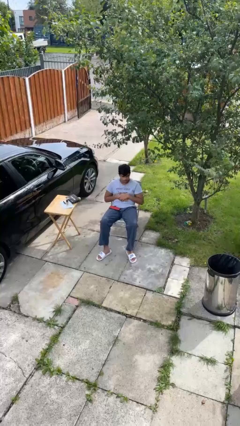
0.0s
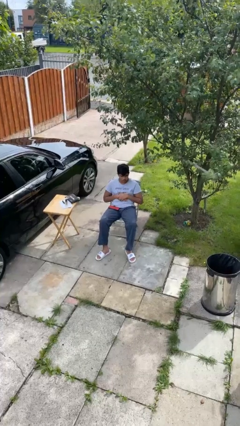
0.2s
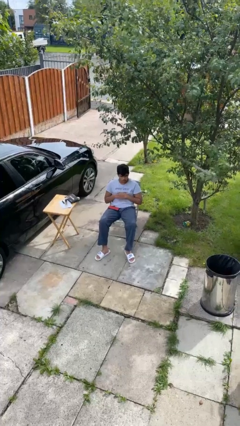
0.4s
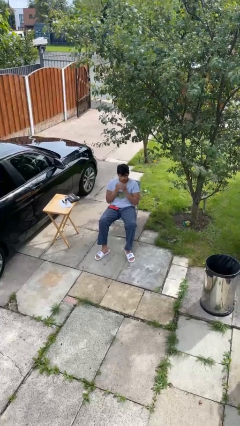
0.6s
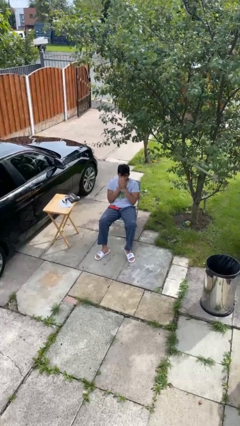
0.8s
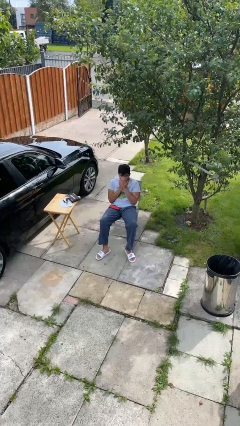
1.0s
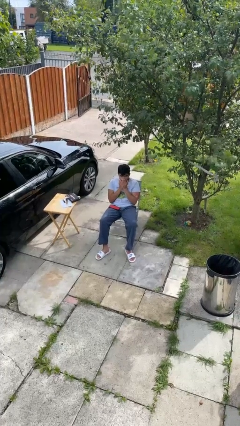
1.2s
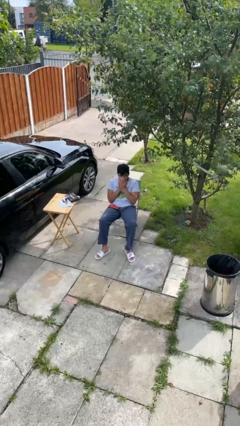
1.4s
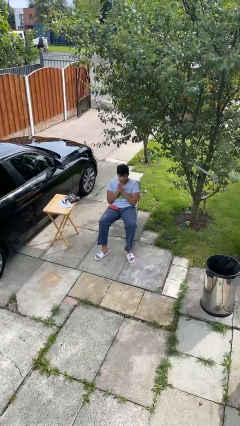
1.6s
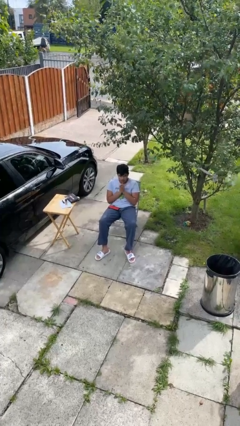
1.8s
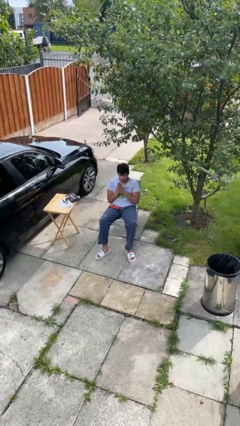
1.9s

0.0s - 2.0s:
person blows into hands

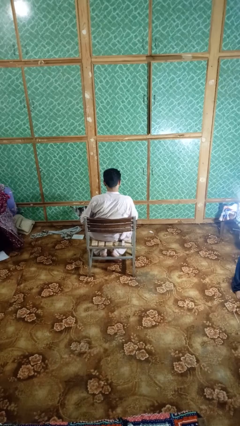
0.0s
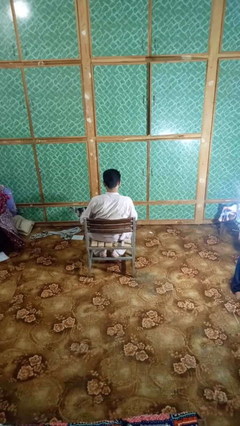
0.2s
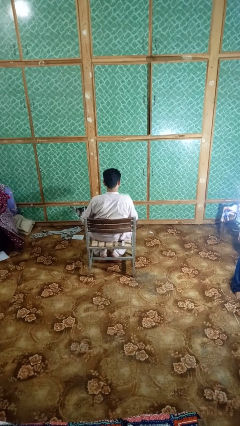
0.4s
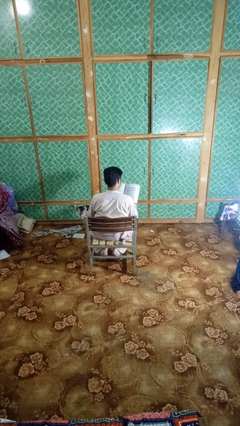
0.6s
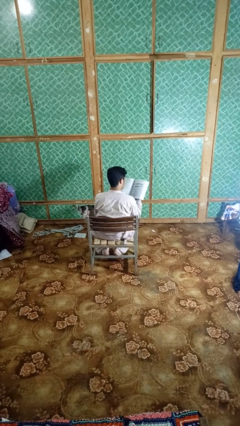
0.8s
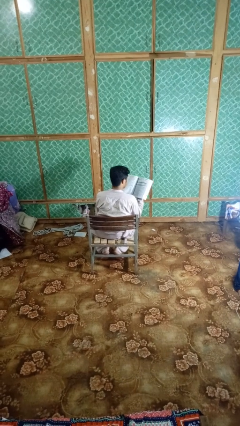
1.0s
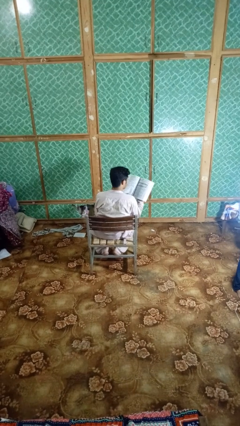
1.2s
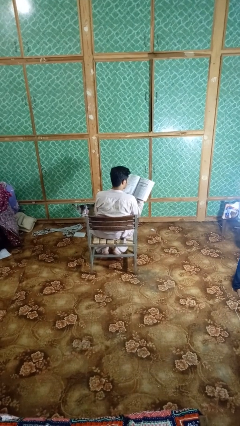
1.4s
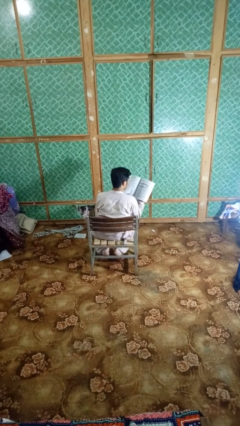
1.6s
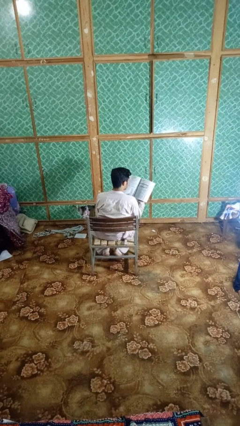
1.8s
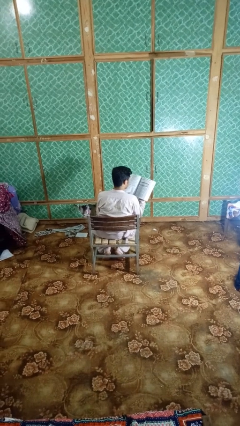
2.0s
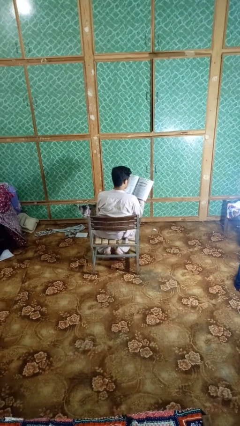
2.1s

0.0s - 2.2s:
person reads book

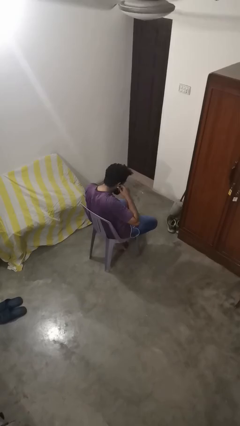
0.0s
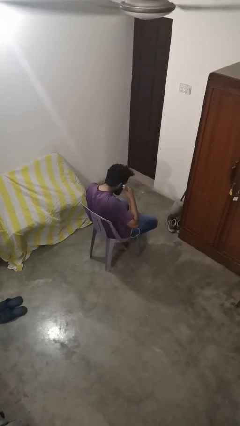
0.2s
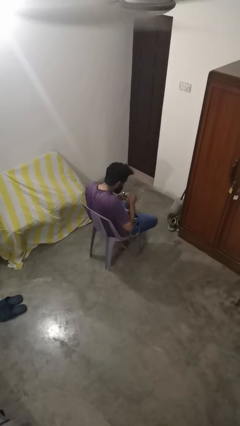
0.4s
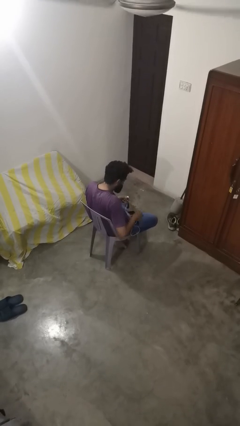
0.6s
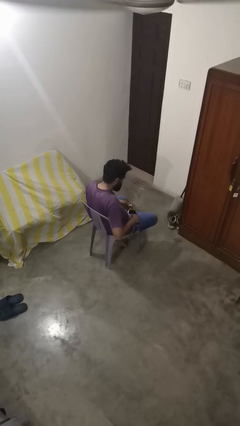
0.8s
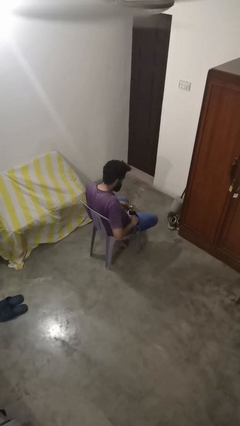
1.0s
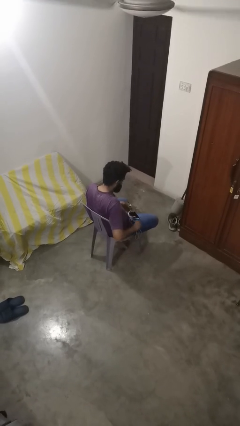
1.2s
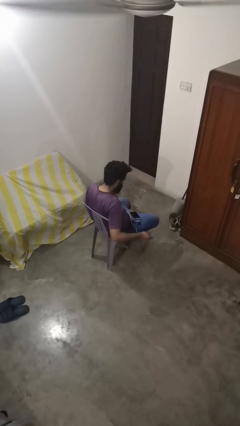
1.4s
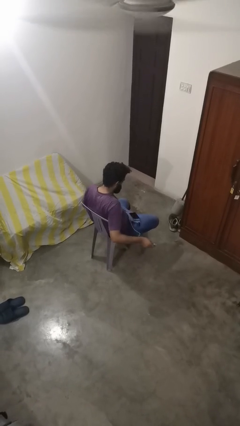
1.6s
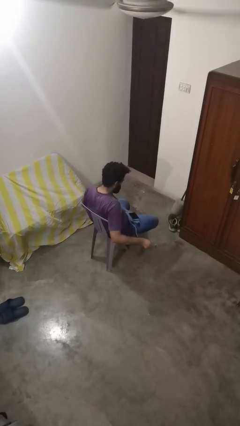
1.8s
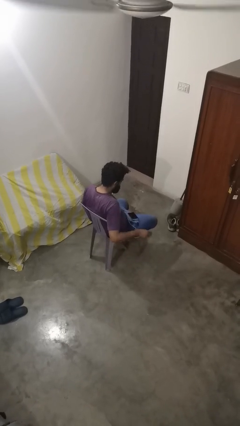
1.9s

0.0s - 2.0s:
person takes off headphones

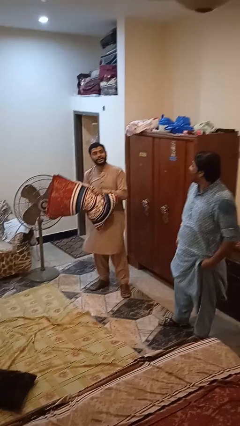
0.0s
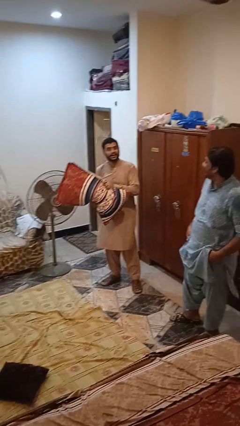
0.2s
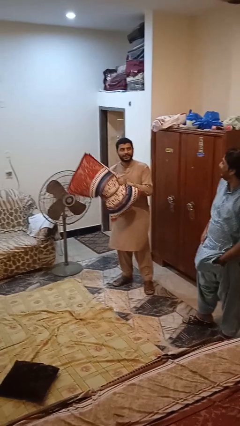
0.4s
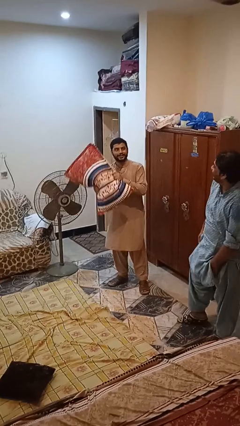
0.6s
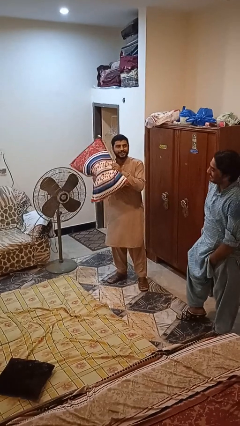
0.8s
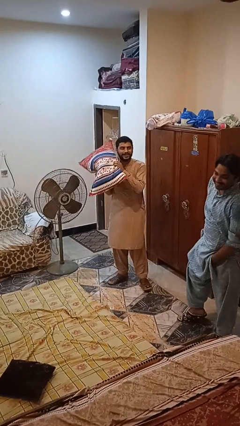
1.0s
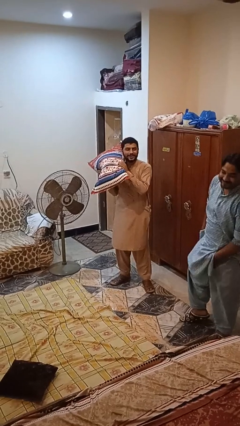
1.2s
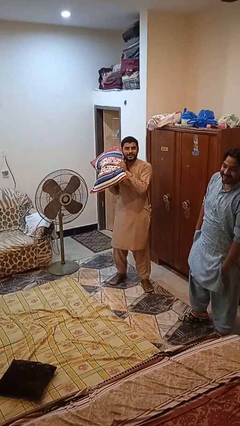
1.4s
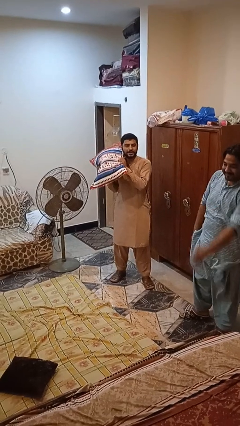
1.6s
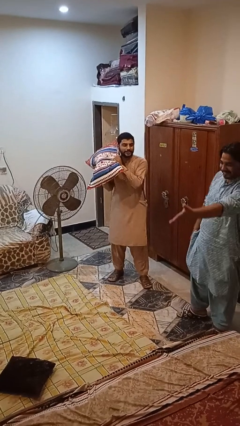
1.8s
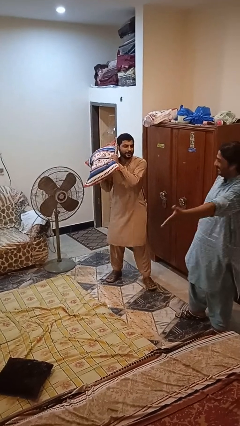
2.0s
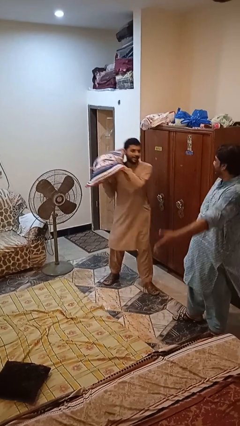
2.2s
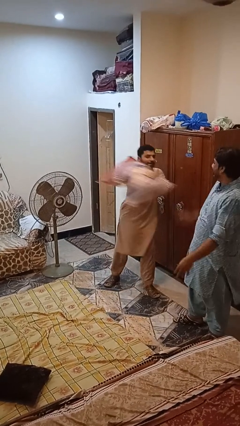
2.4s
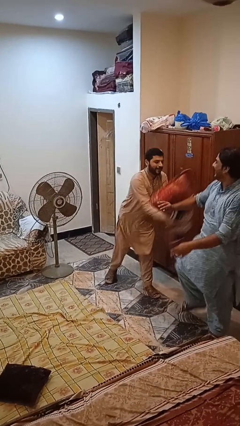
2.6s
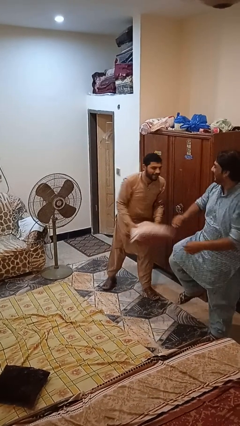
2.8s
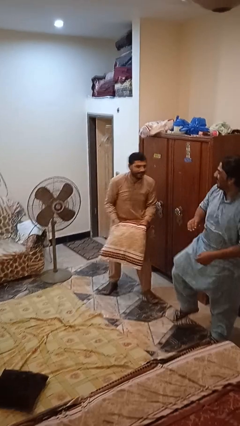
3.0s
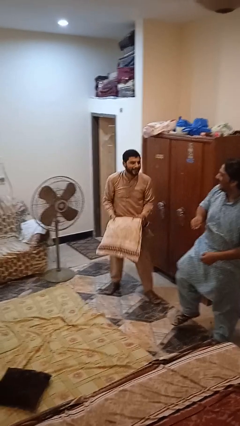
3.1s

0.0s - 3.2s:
person hits person with pillow

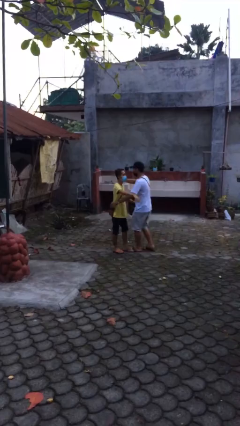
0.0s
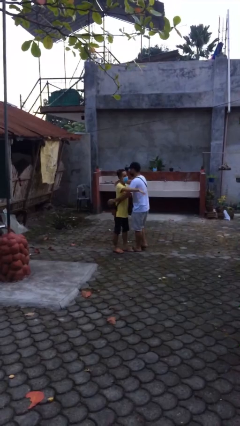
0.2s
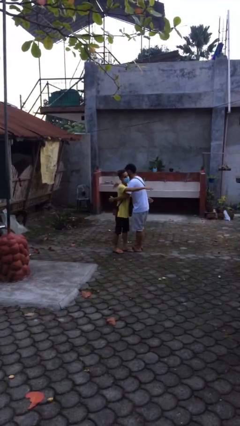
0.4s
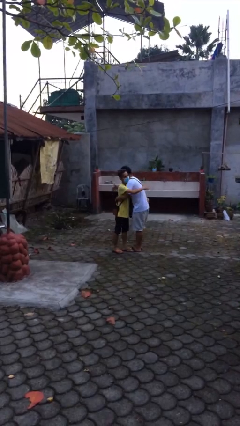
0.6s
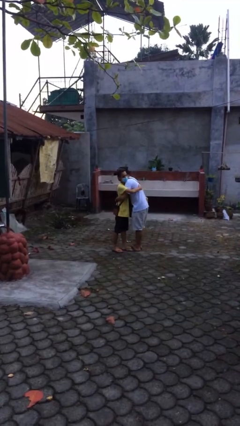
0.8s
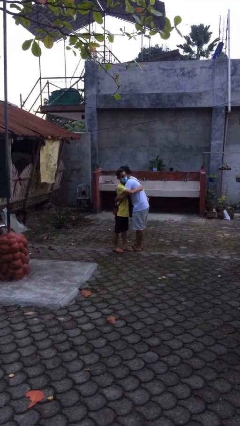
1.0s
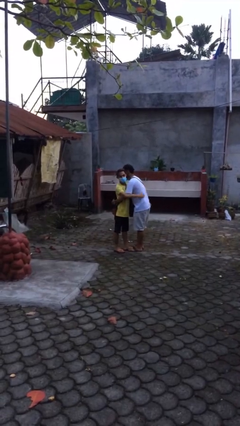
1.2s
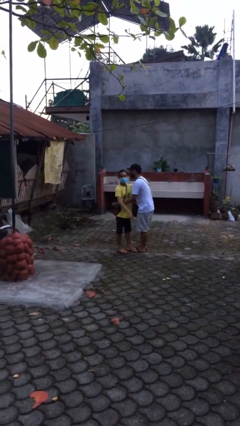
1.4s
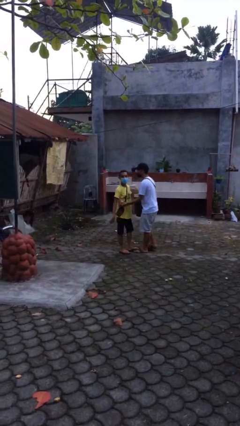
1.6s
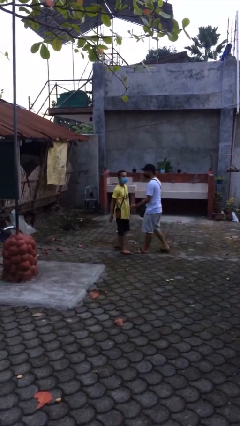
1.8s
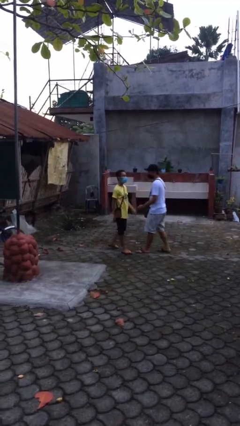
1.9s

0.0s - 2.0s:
person embraces person

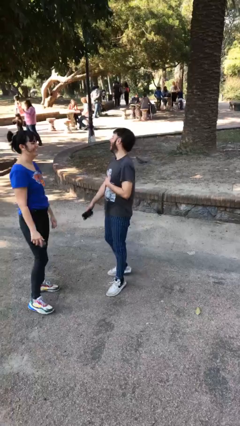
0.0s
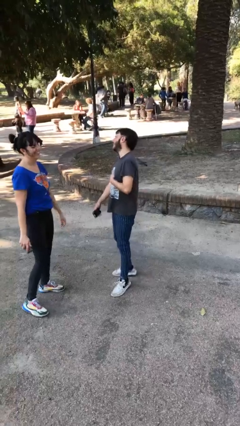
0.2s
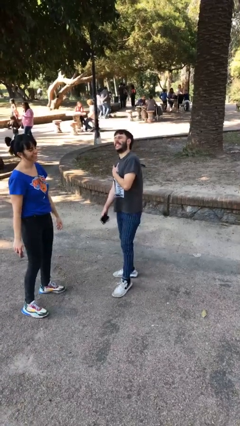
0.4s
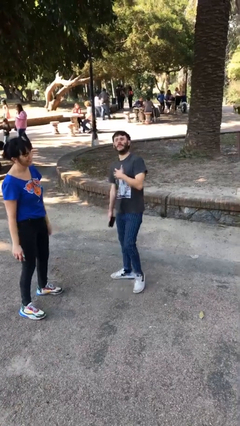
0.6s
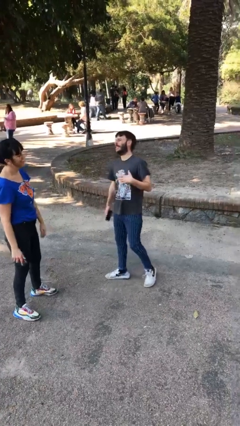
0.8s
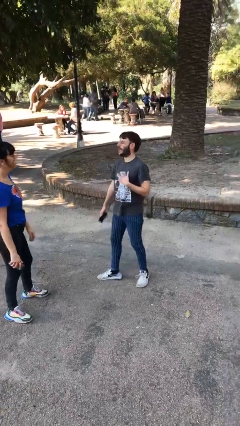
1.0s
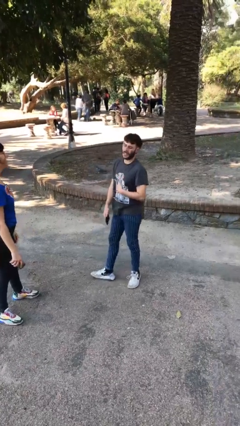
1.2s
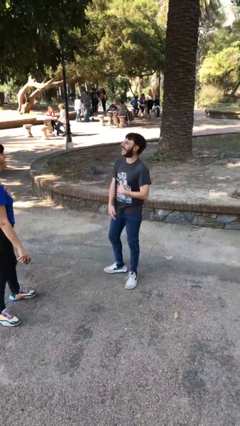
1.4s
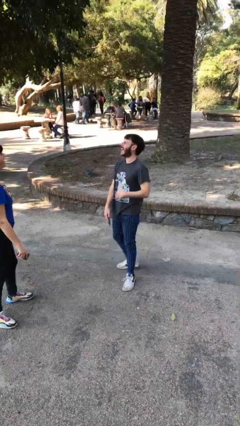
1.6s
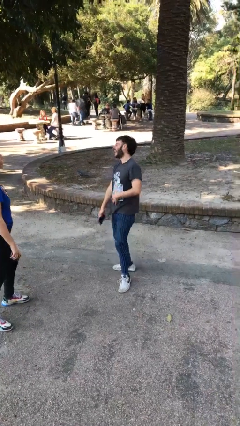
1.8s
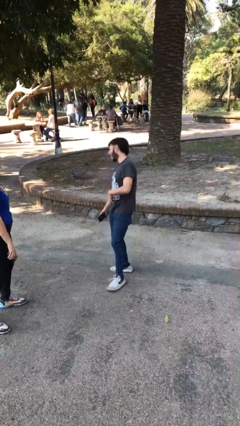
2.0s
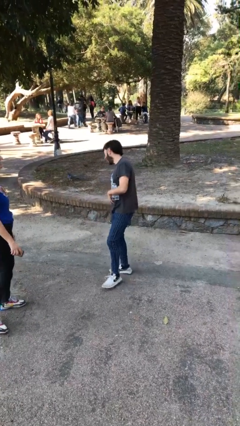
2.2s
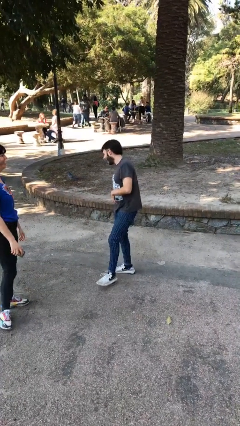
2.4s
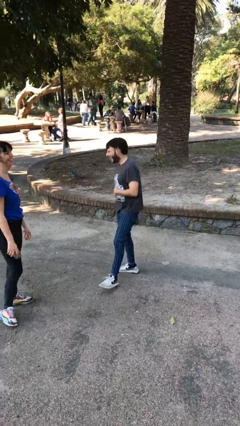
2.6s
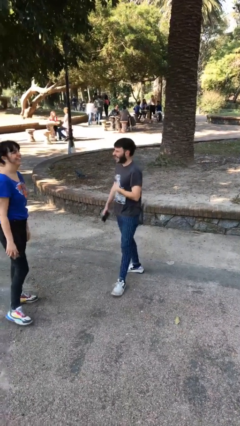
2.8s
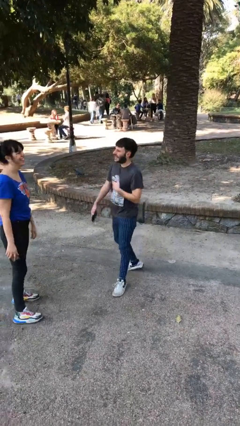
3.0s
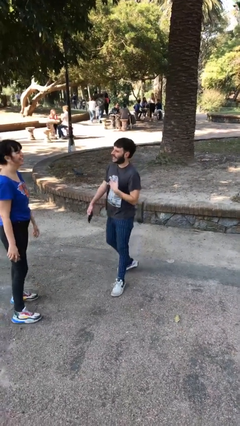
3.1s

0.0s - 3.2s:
person laughs with person

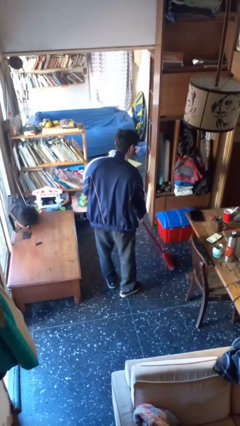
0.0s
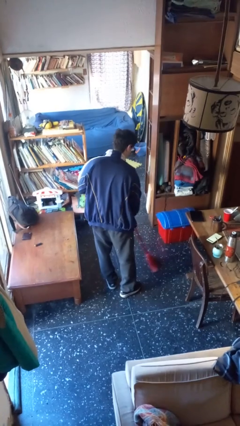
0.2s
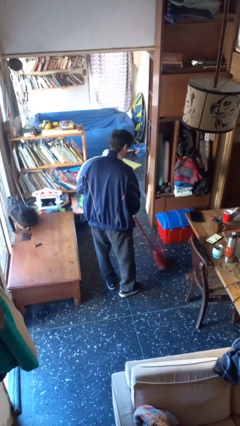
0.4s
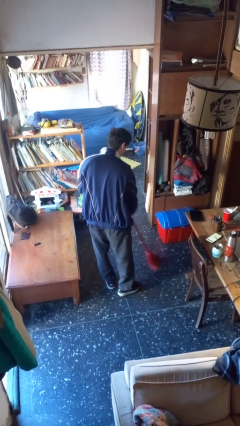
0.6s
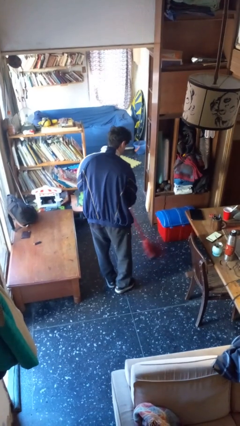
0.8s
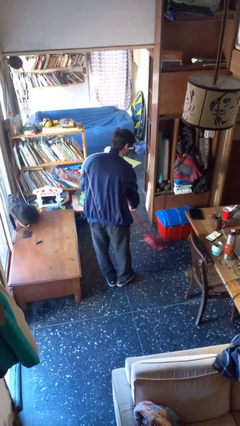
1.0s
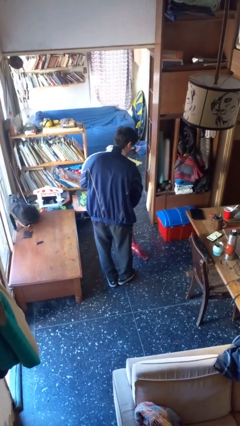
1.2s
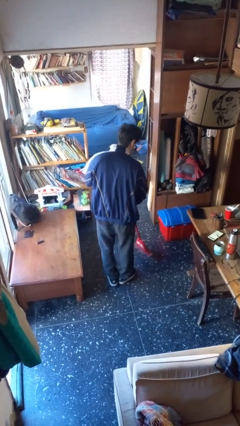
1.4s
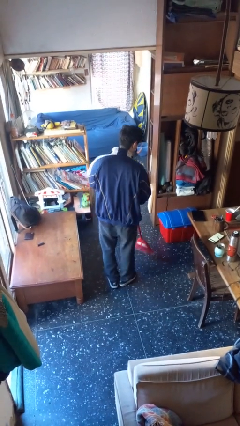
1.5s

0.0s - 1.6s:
person sweeps floor

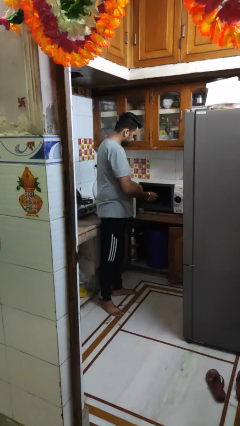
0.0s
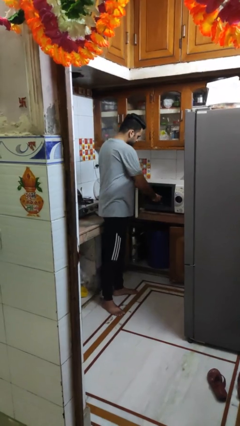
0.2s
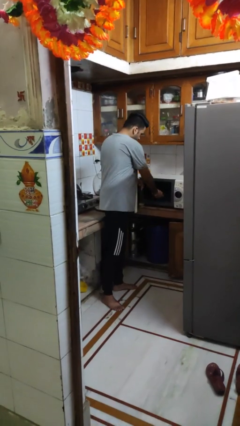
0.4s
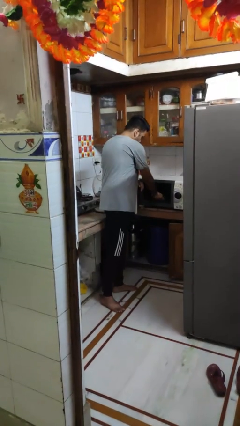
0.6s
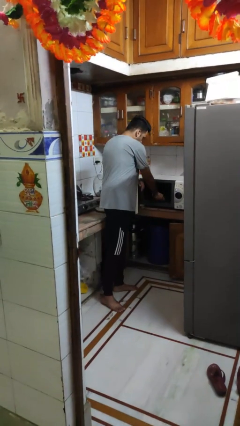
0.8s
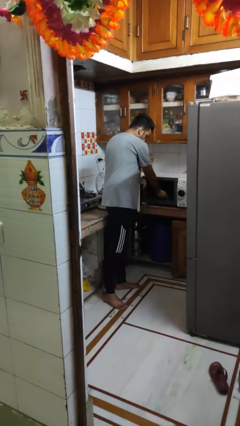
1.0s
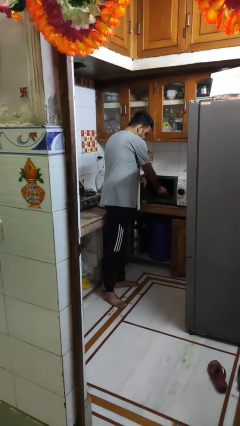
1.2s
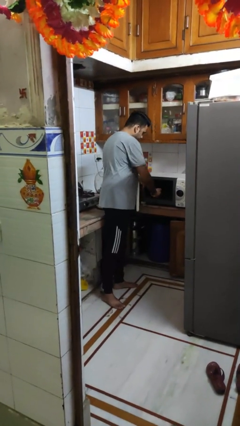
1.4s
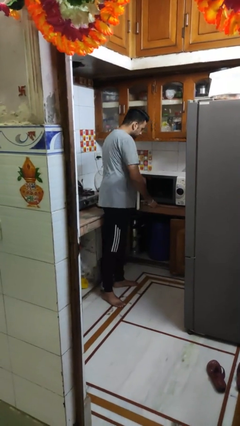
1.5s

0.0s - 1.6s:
person puts object into microwave
